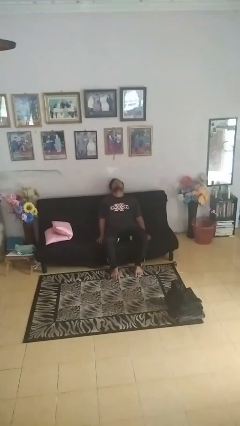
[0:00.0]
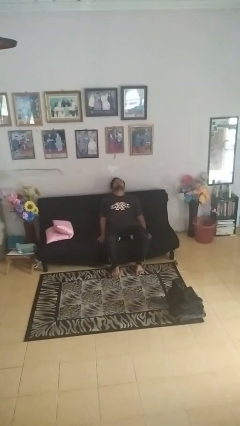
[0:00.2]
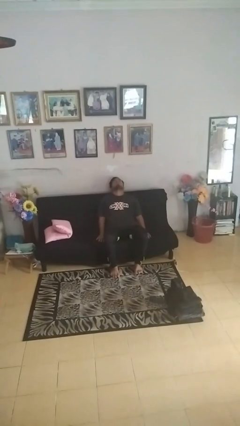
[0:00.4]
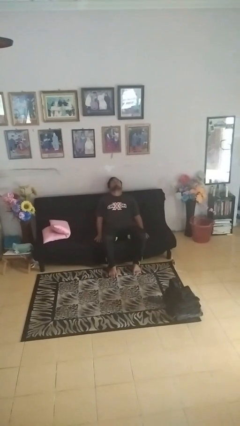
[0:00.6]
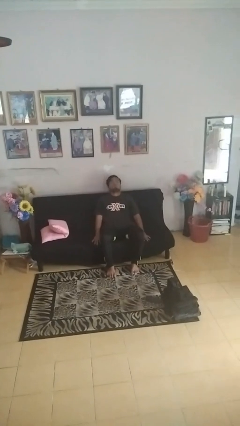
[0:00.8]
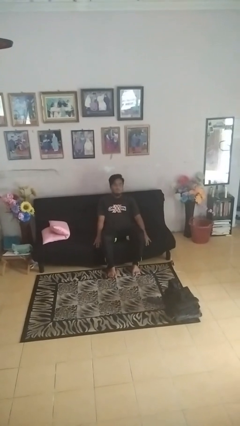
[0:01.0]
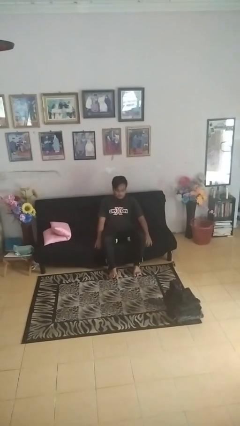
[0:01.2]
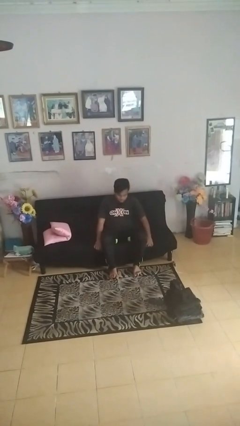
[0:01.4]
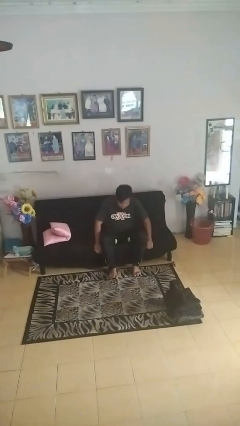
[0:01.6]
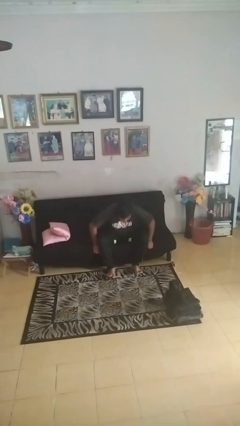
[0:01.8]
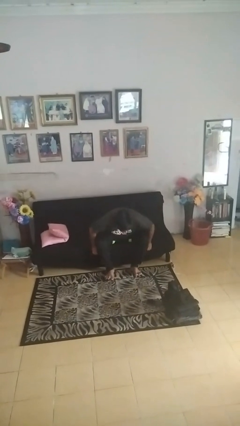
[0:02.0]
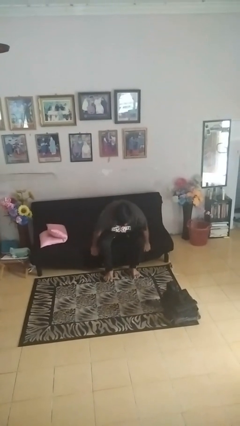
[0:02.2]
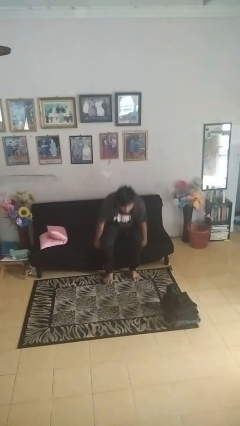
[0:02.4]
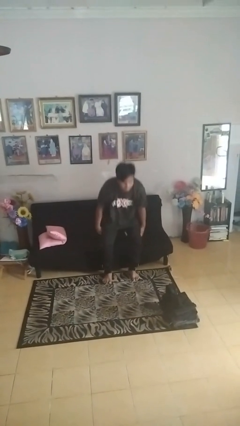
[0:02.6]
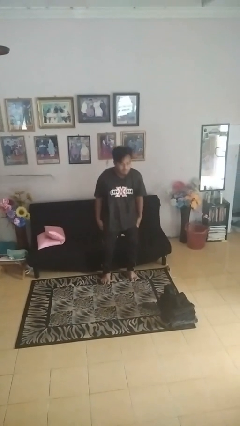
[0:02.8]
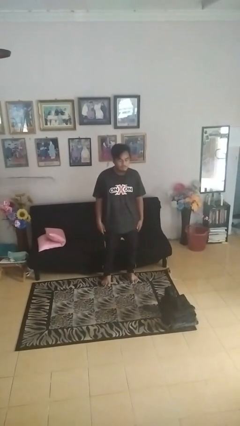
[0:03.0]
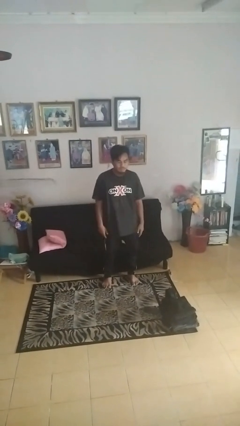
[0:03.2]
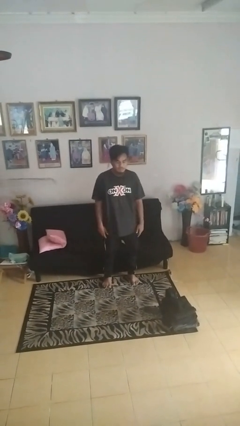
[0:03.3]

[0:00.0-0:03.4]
person stands up

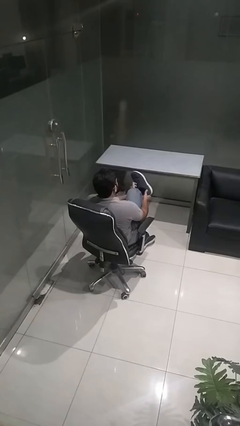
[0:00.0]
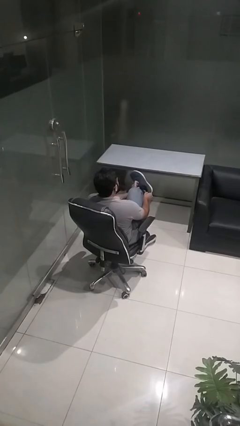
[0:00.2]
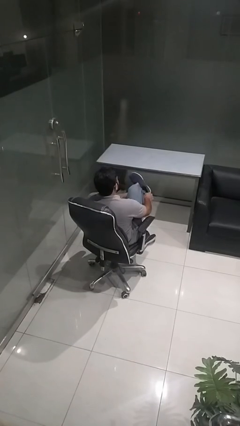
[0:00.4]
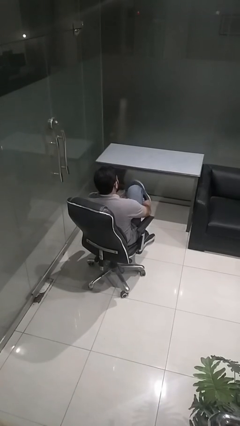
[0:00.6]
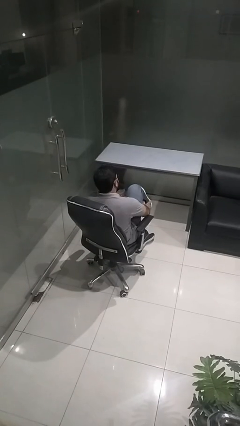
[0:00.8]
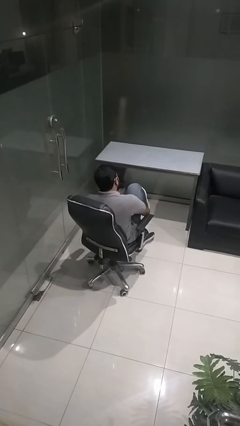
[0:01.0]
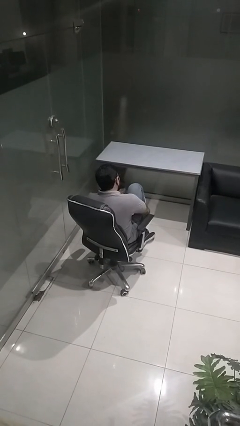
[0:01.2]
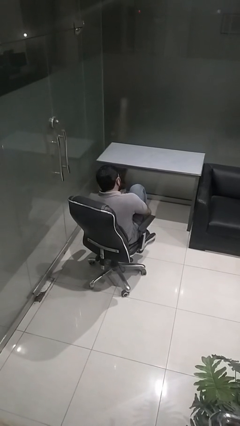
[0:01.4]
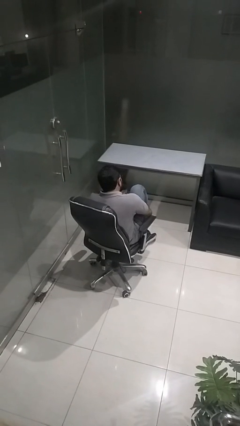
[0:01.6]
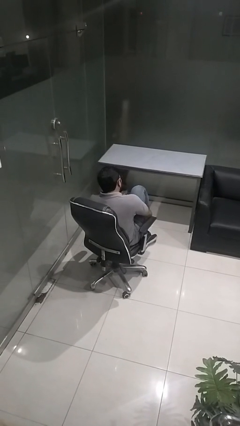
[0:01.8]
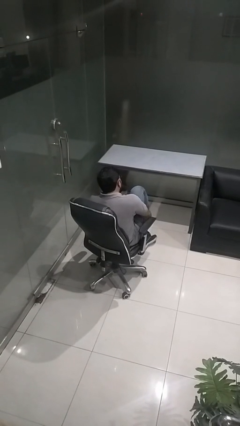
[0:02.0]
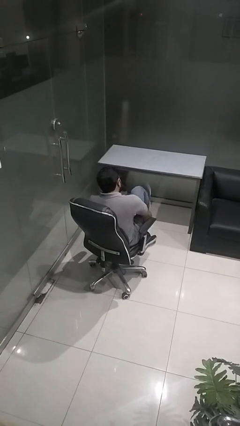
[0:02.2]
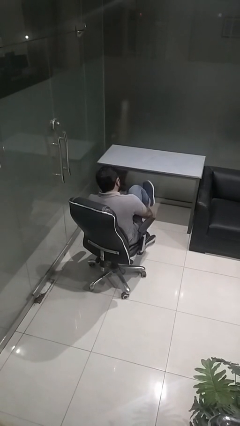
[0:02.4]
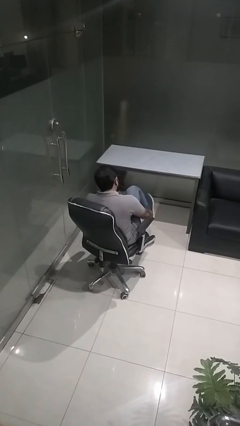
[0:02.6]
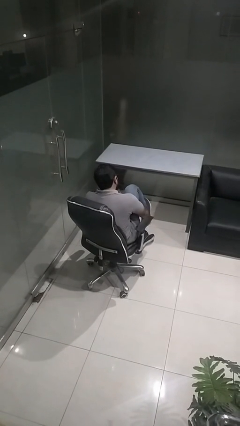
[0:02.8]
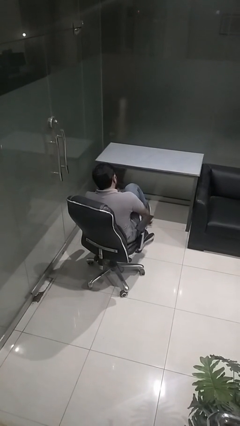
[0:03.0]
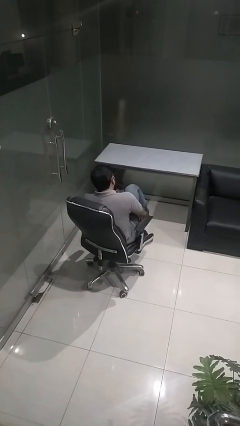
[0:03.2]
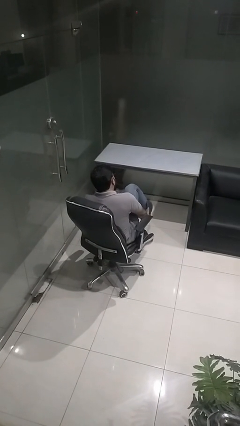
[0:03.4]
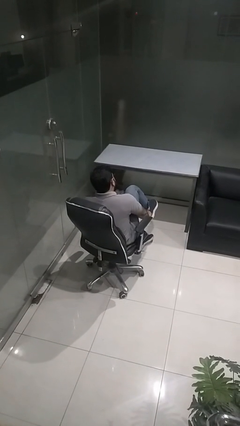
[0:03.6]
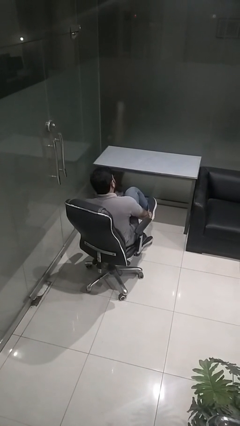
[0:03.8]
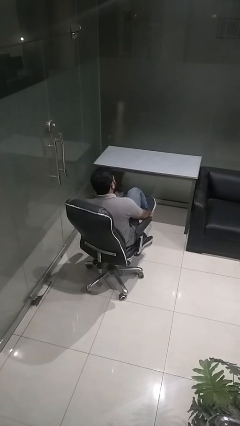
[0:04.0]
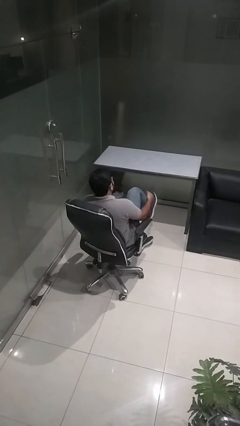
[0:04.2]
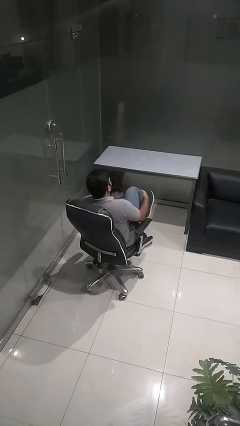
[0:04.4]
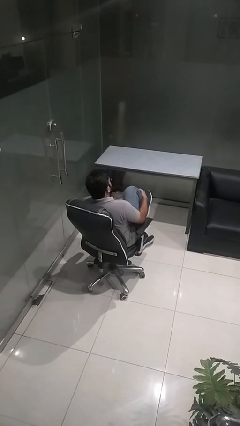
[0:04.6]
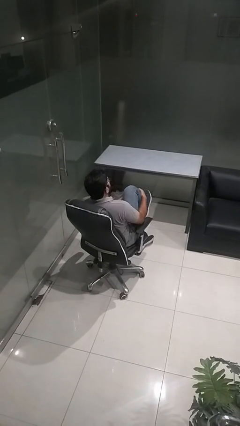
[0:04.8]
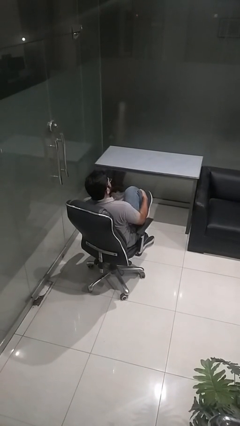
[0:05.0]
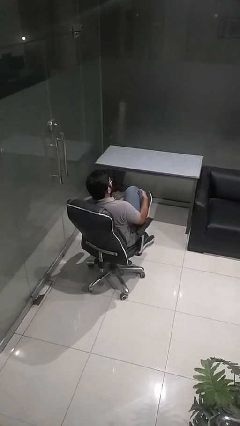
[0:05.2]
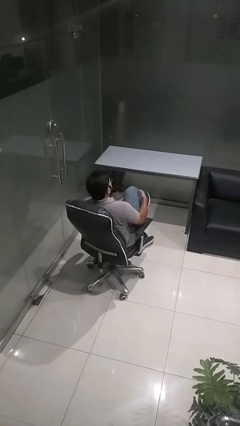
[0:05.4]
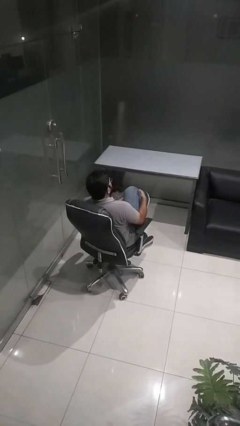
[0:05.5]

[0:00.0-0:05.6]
person puts on shoes

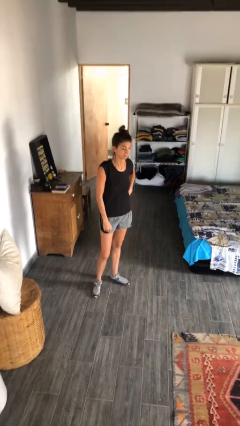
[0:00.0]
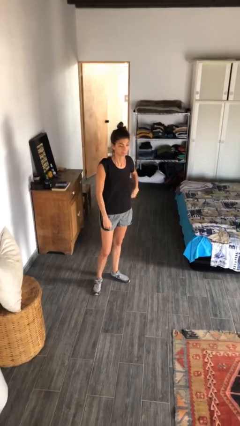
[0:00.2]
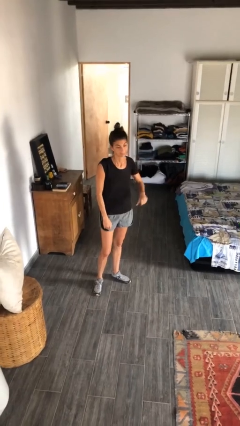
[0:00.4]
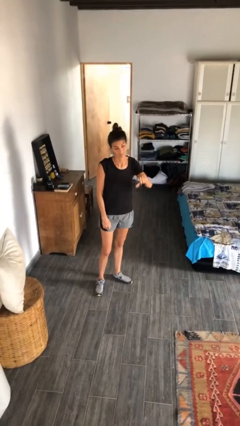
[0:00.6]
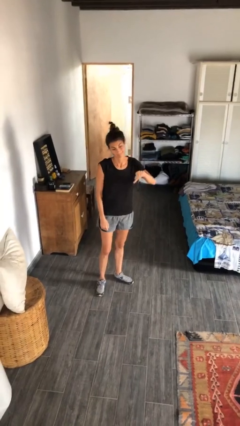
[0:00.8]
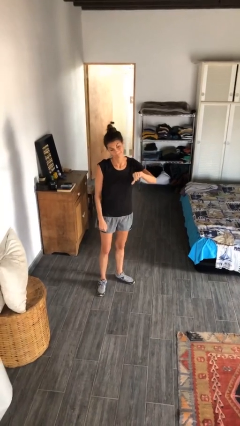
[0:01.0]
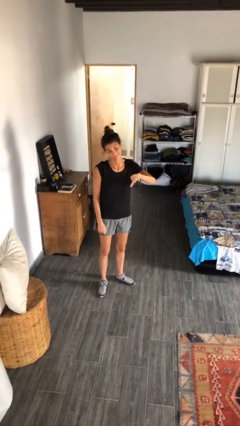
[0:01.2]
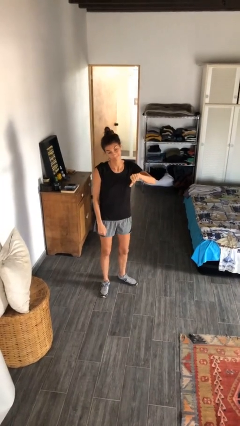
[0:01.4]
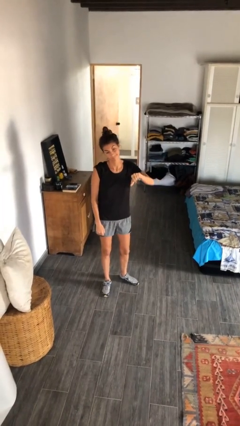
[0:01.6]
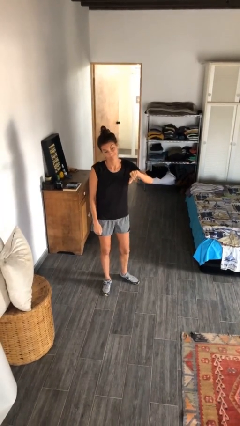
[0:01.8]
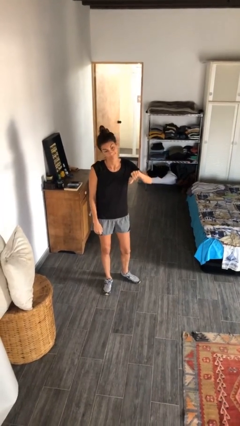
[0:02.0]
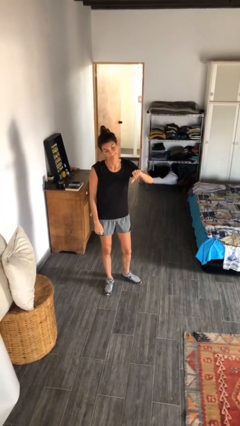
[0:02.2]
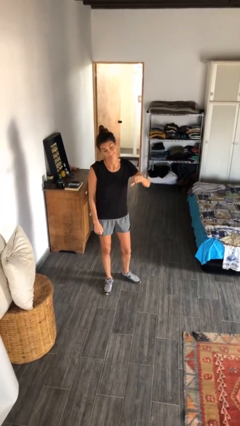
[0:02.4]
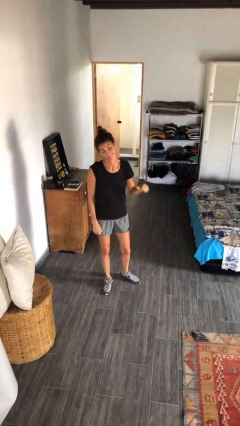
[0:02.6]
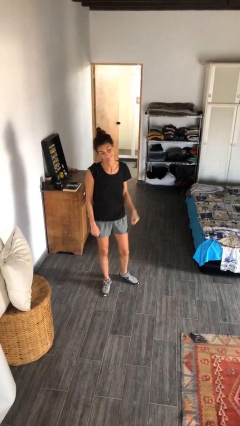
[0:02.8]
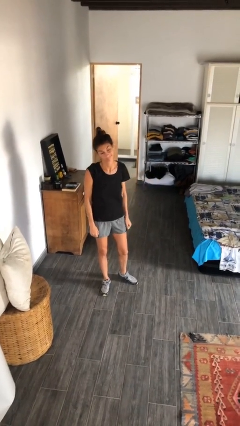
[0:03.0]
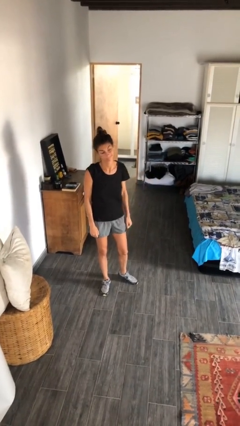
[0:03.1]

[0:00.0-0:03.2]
person gestures thumbs down

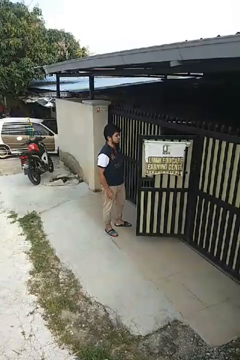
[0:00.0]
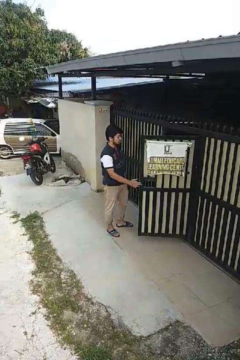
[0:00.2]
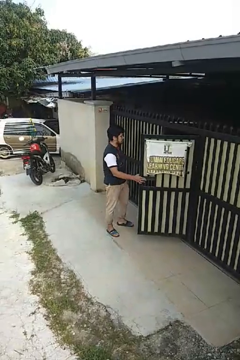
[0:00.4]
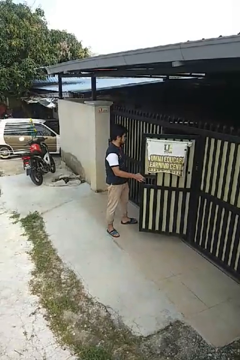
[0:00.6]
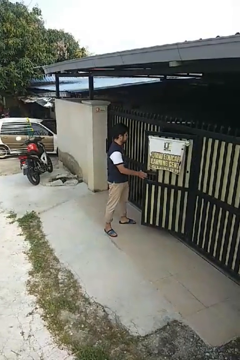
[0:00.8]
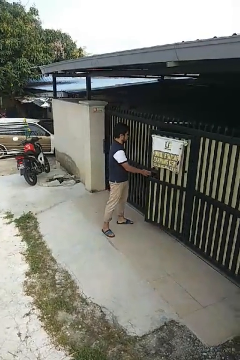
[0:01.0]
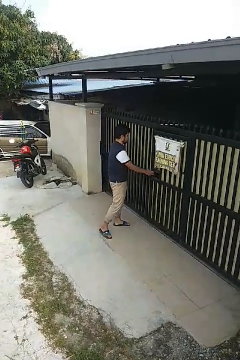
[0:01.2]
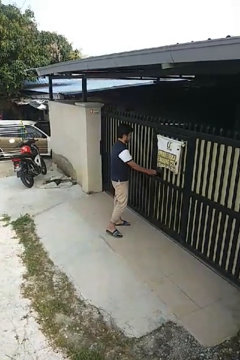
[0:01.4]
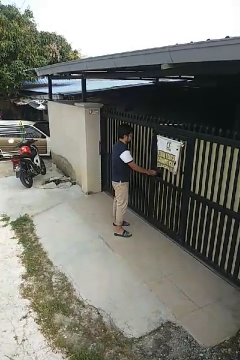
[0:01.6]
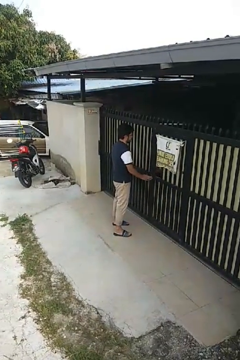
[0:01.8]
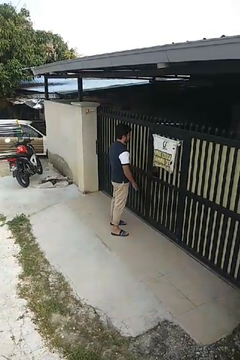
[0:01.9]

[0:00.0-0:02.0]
person closes gate

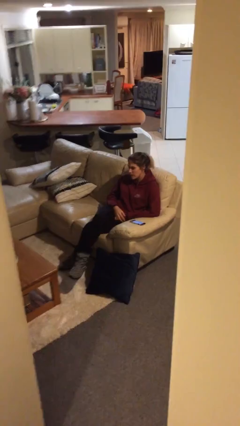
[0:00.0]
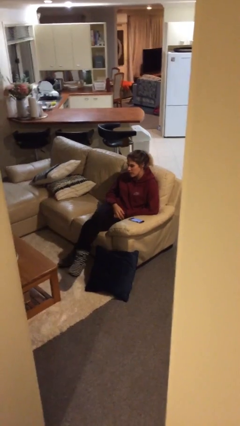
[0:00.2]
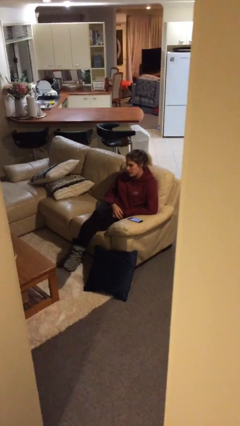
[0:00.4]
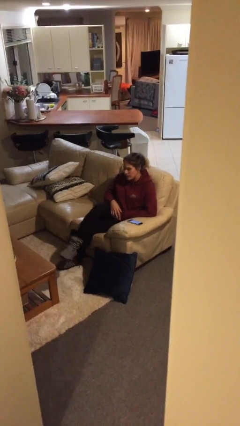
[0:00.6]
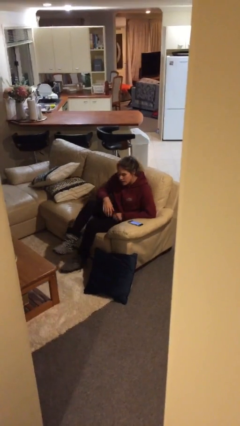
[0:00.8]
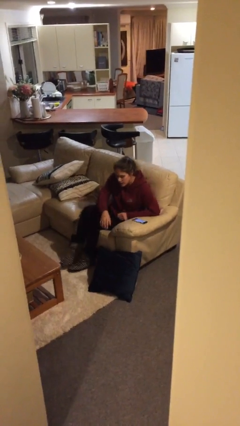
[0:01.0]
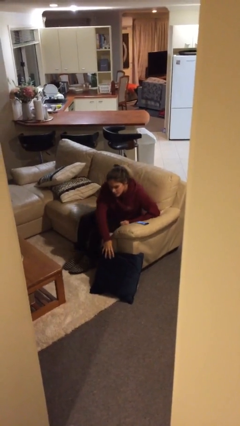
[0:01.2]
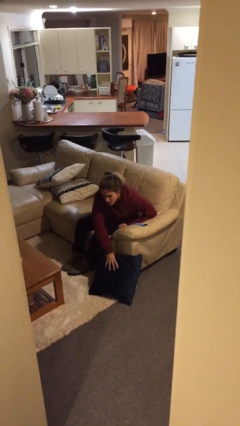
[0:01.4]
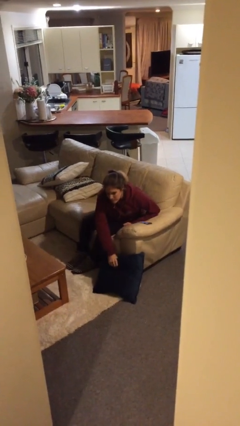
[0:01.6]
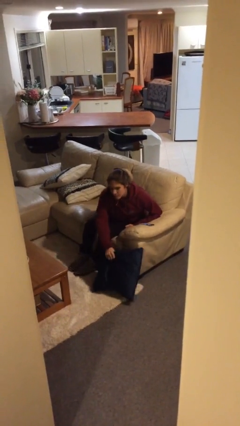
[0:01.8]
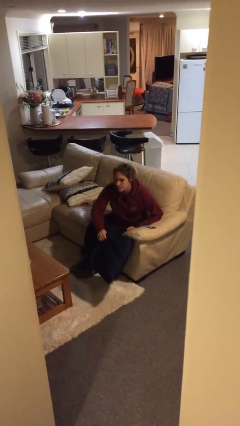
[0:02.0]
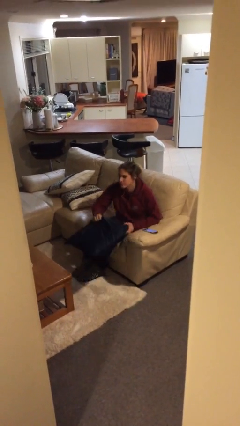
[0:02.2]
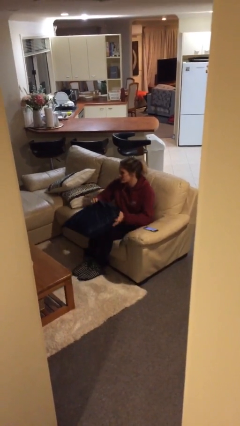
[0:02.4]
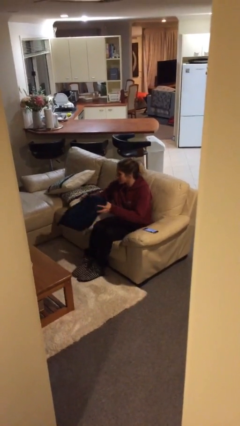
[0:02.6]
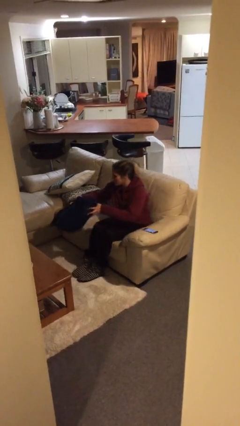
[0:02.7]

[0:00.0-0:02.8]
person picks up object from floor

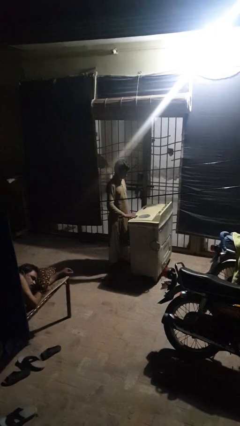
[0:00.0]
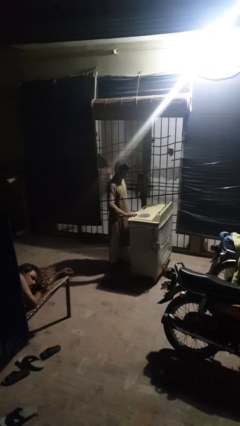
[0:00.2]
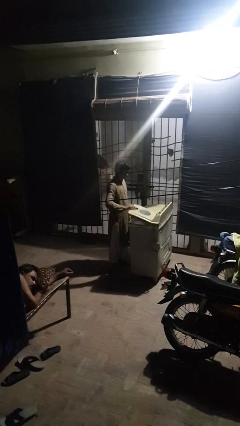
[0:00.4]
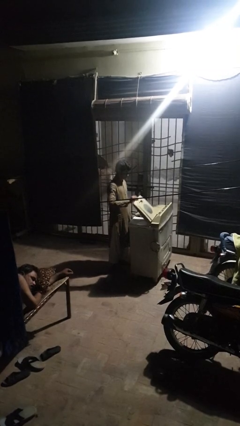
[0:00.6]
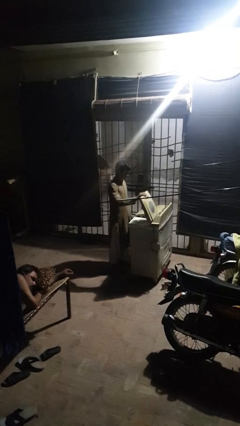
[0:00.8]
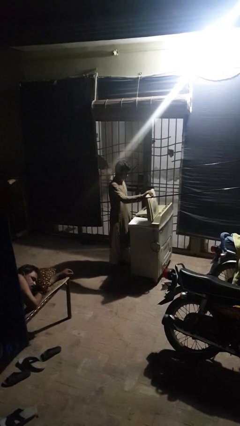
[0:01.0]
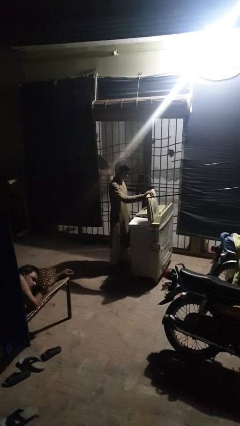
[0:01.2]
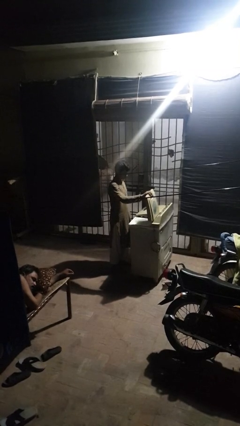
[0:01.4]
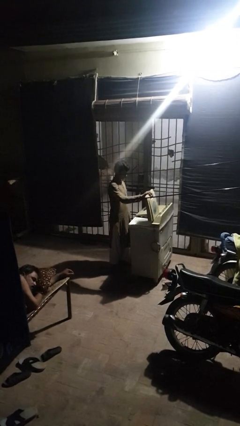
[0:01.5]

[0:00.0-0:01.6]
person opens clothes washer
